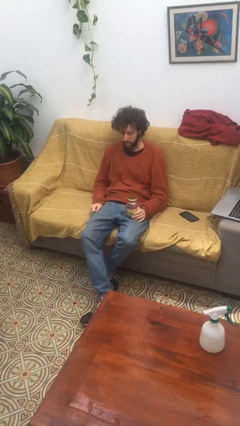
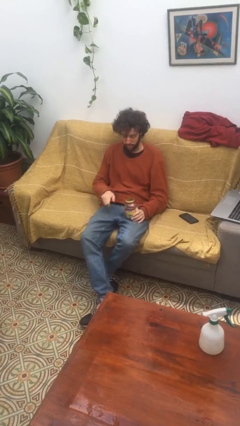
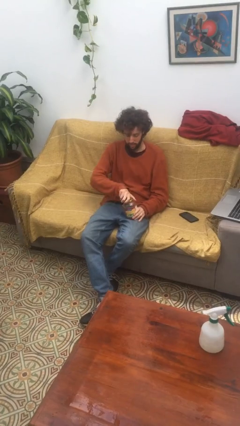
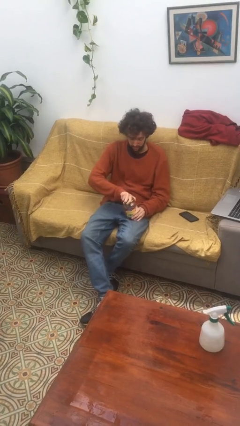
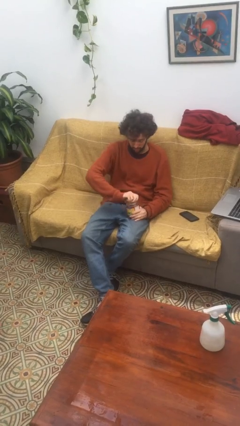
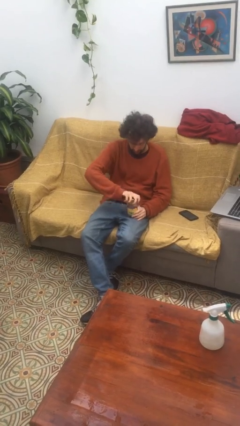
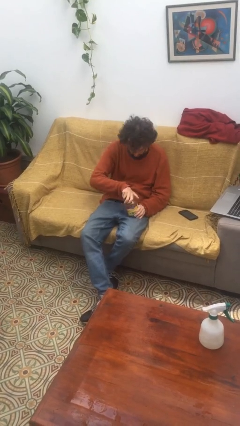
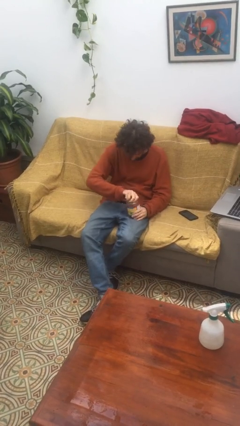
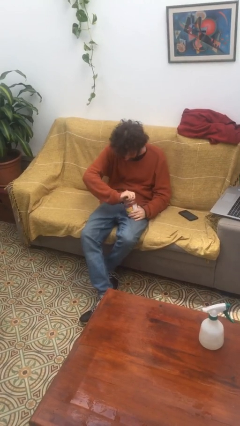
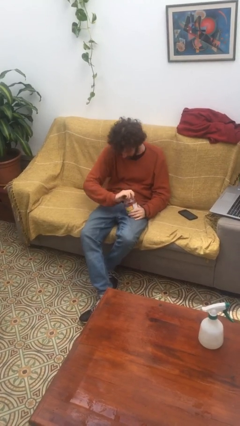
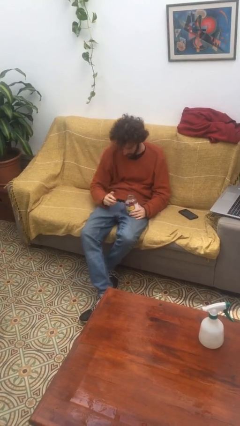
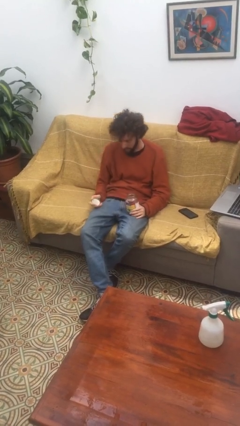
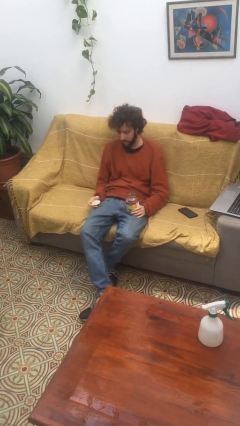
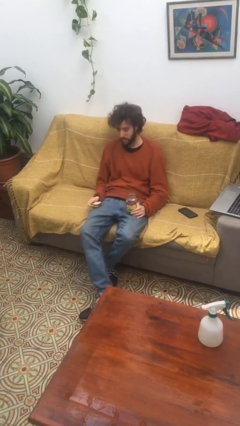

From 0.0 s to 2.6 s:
person opens jar

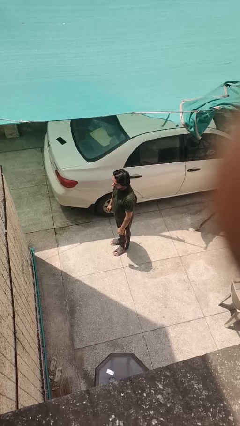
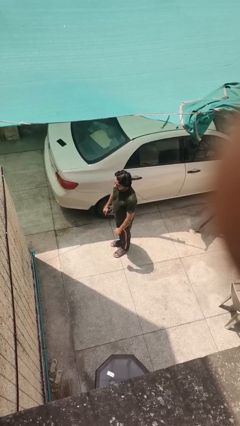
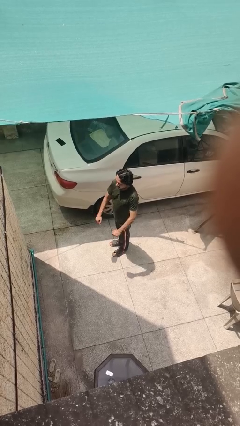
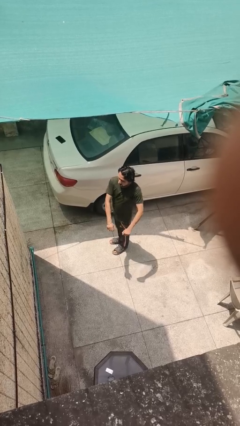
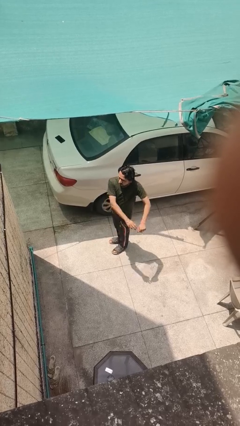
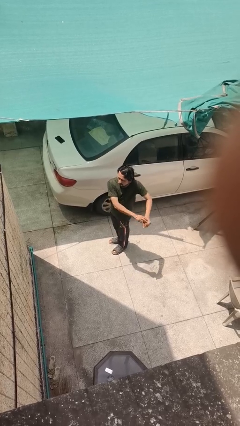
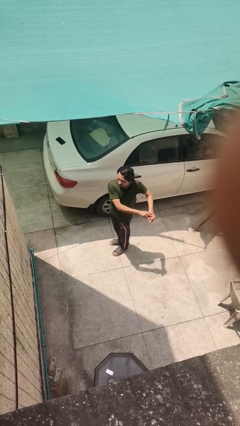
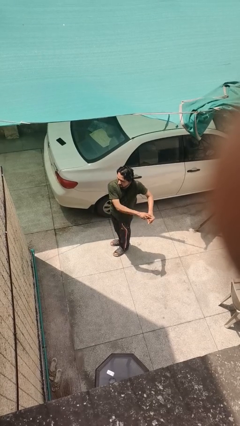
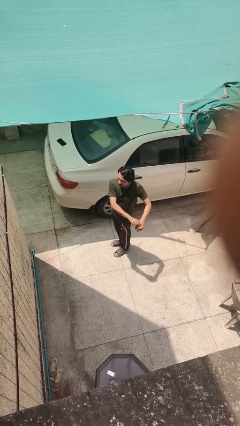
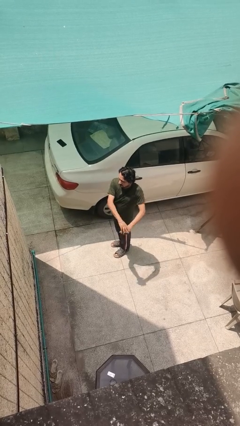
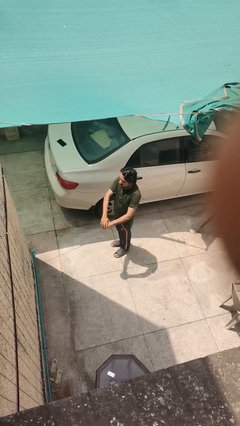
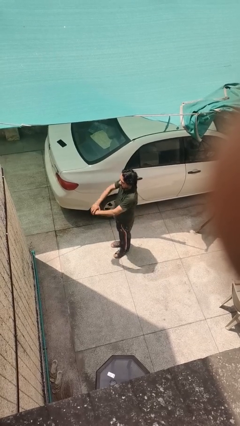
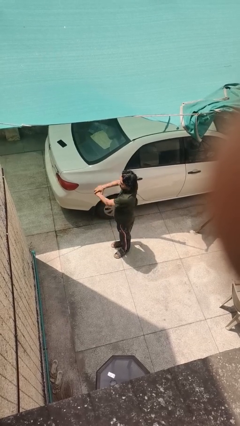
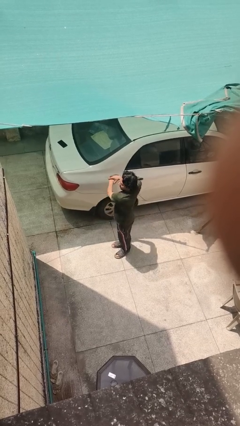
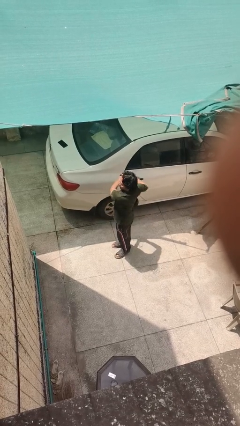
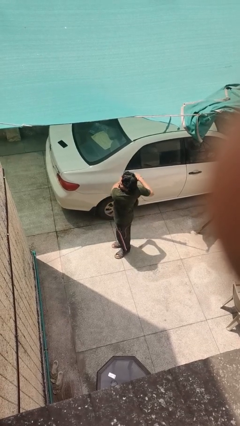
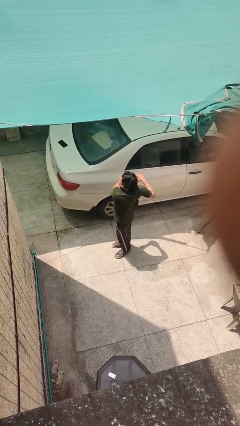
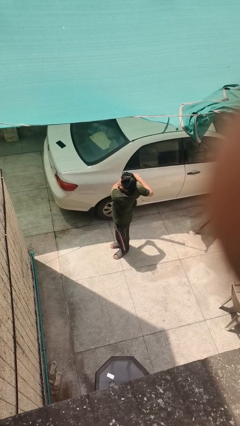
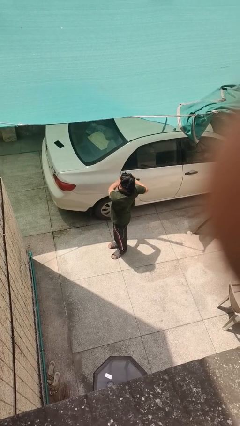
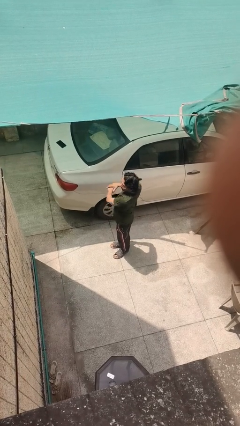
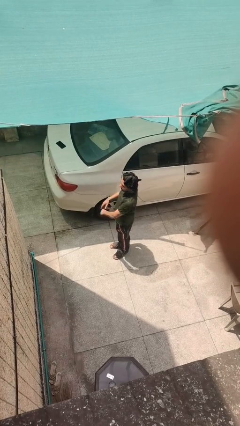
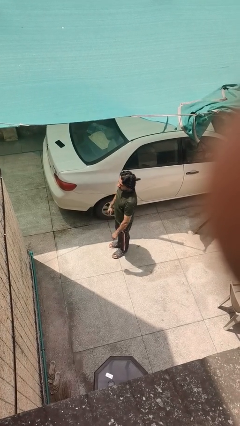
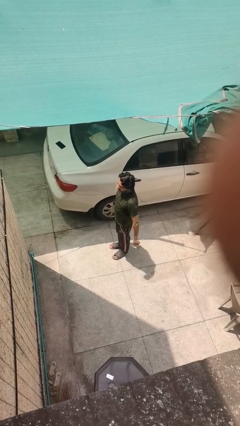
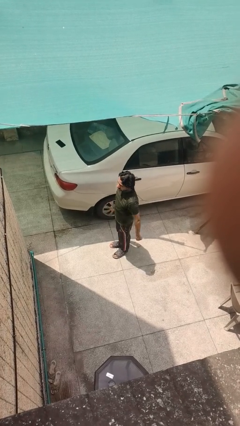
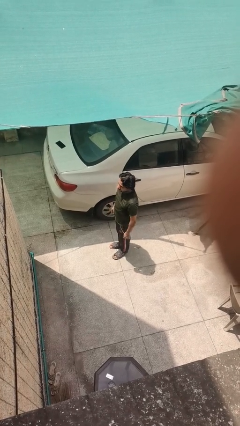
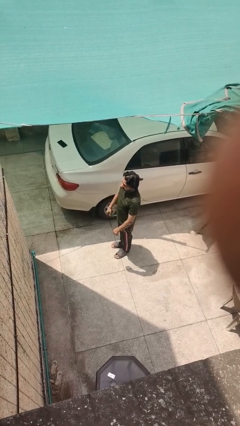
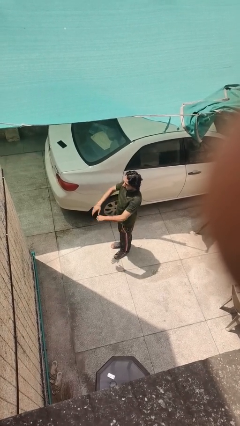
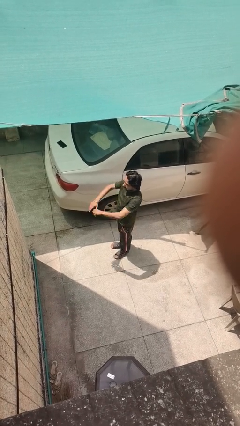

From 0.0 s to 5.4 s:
person stretches arms to side

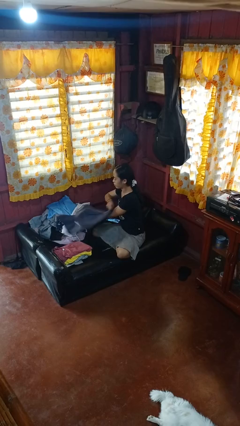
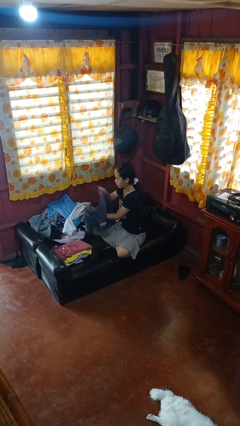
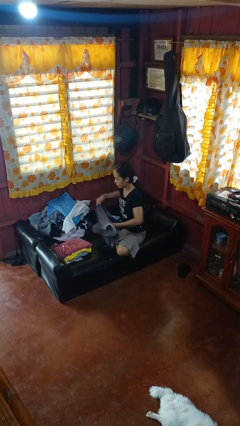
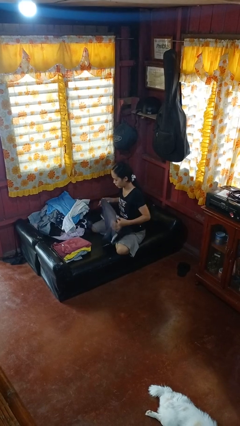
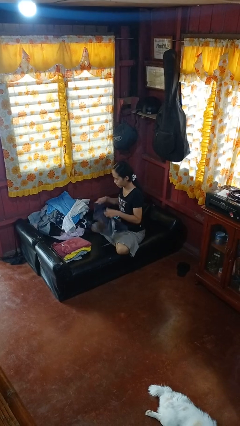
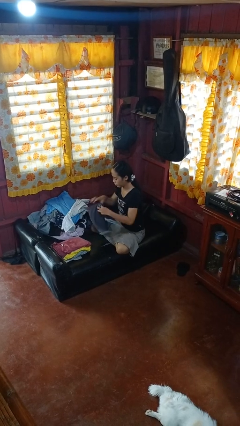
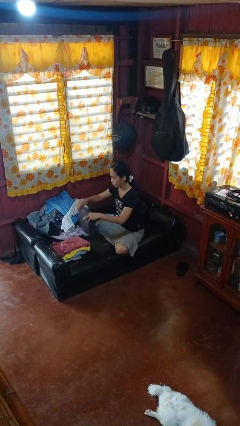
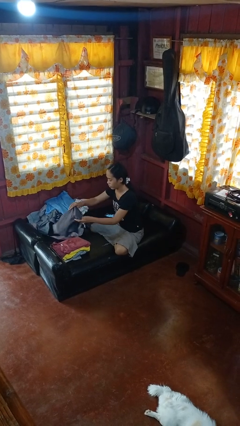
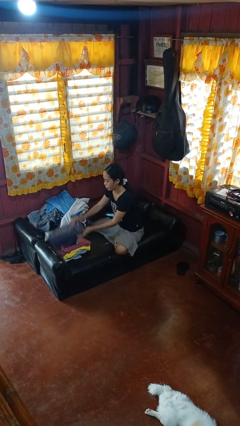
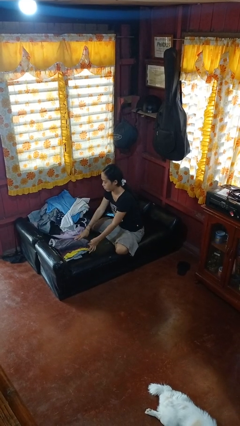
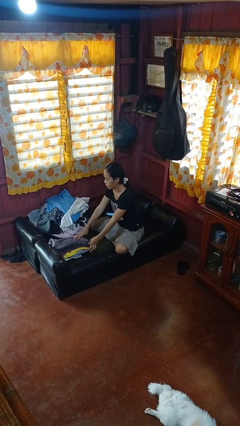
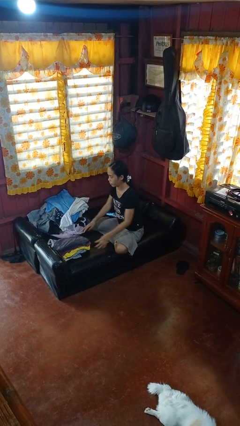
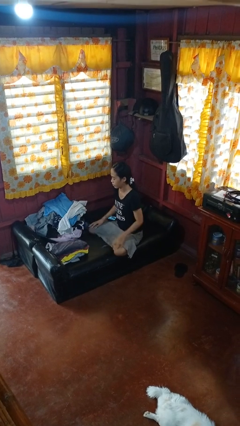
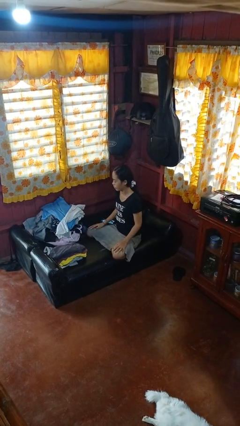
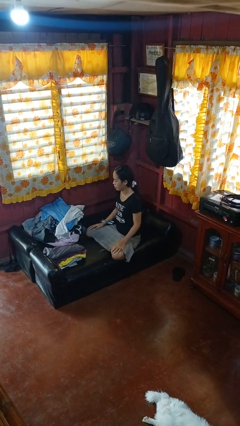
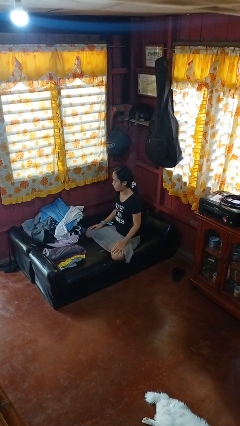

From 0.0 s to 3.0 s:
person folds shirt

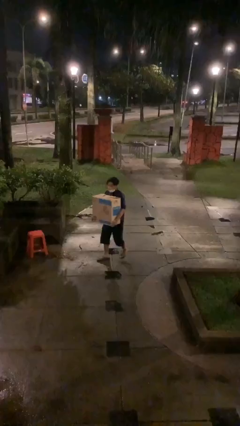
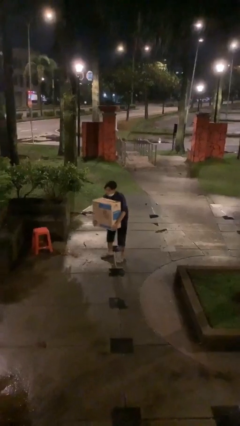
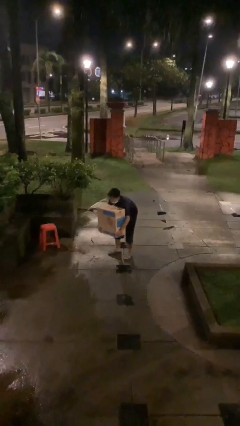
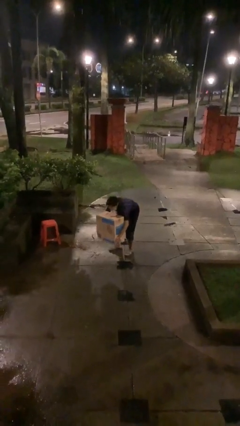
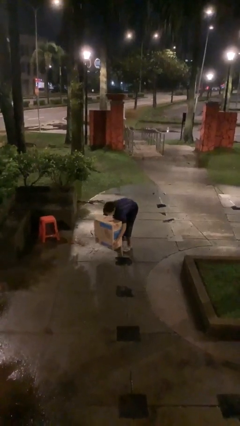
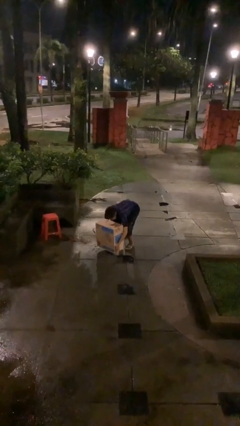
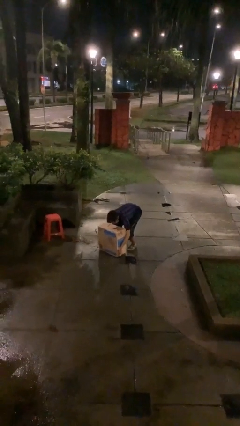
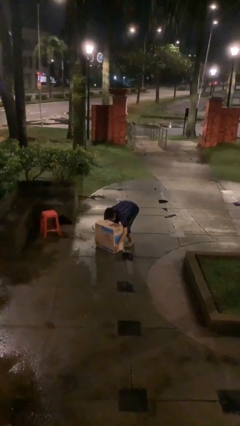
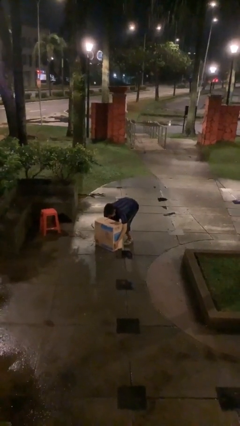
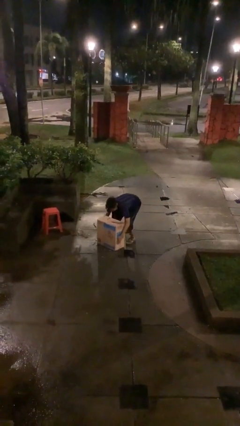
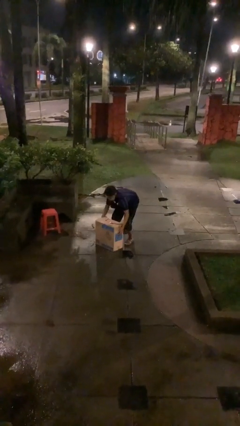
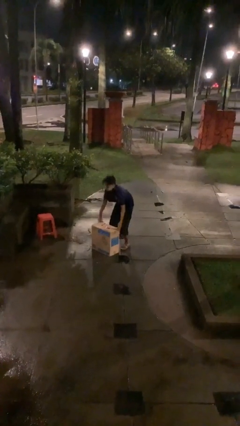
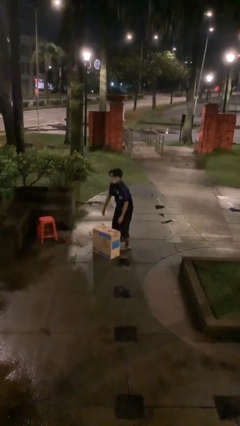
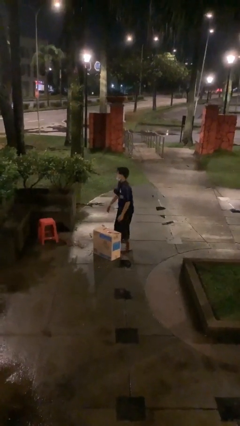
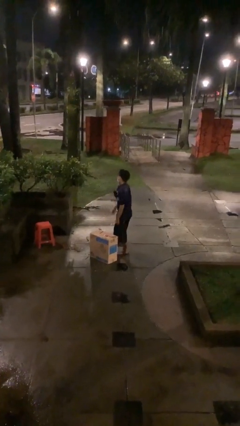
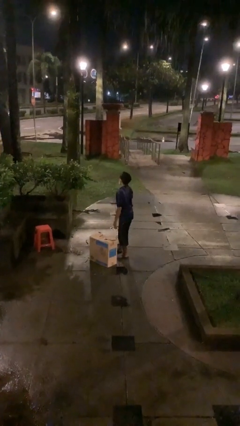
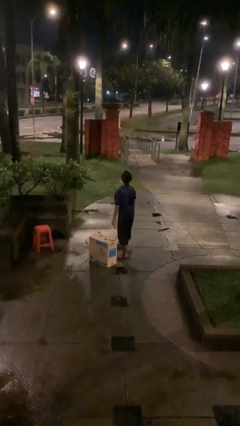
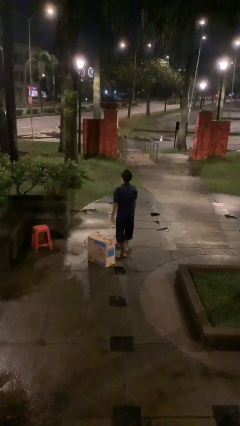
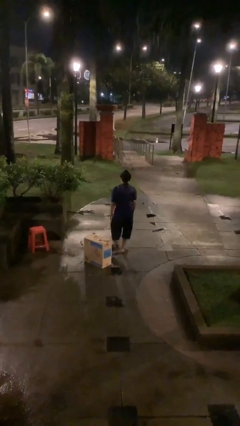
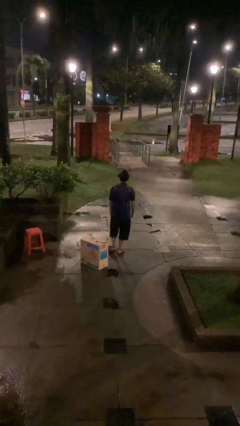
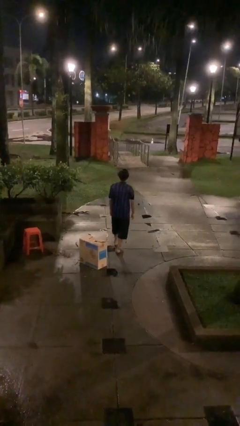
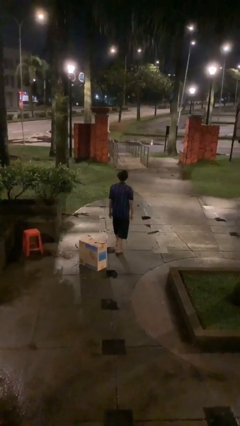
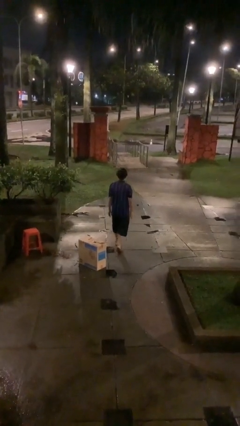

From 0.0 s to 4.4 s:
person puts down object on floor

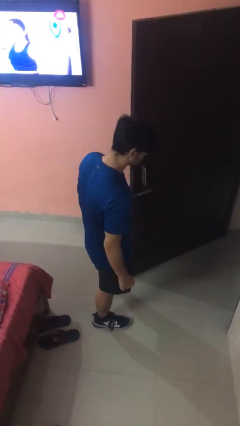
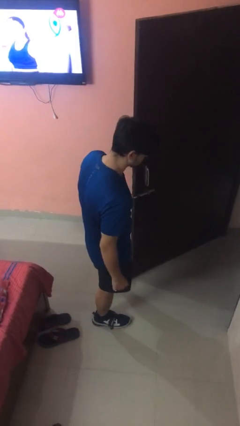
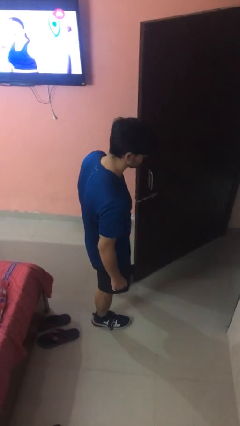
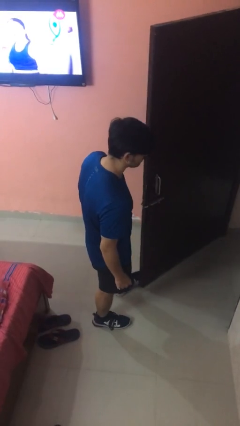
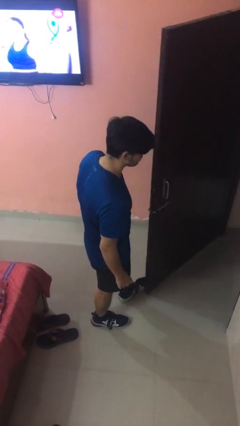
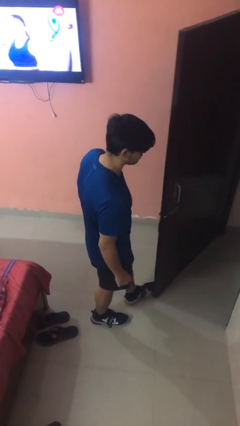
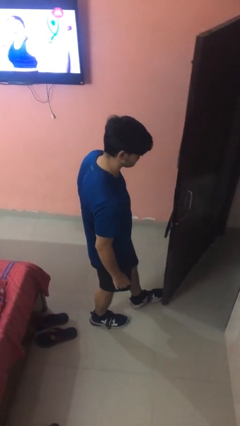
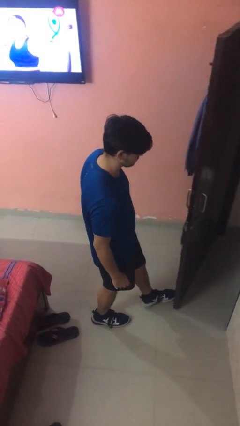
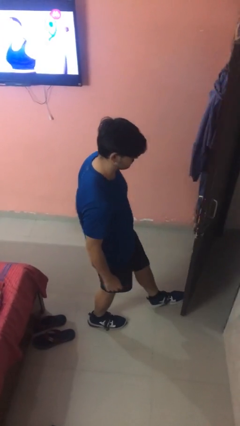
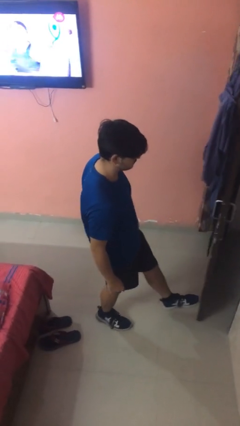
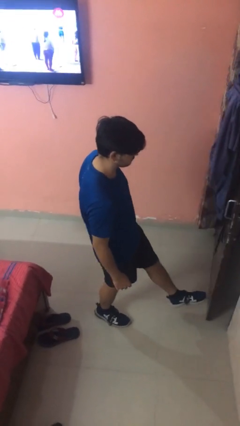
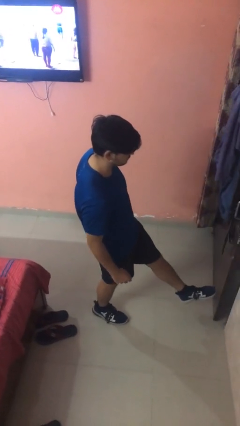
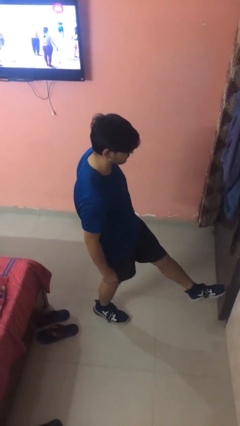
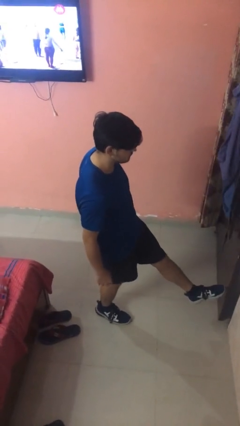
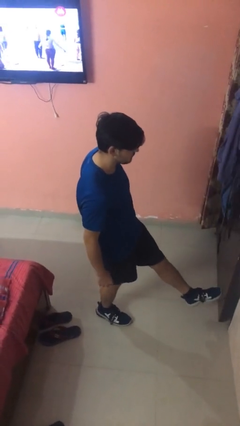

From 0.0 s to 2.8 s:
person closes door with foot
